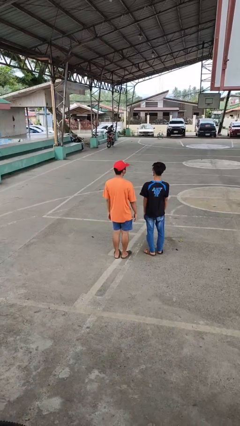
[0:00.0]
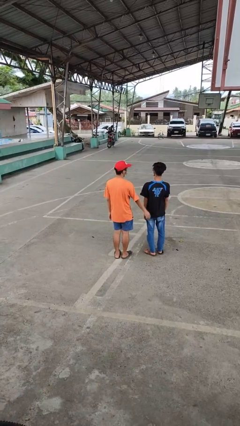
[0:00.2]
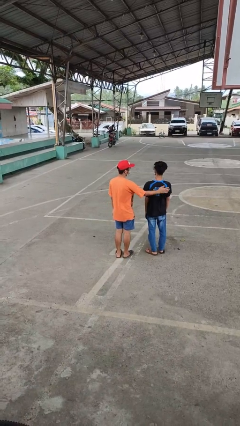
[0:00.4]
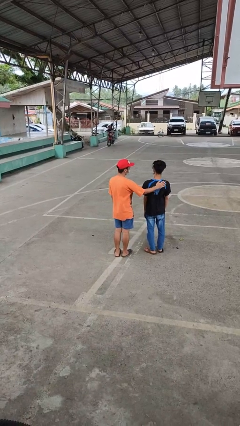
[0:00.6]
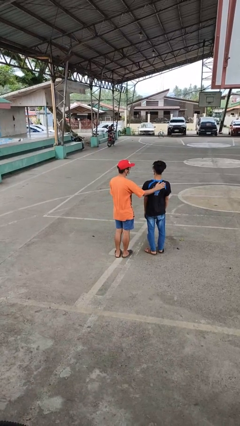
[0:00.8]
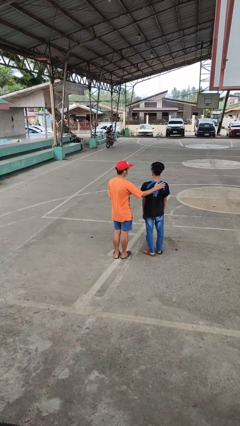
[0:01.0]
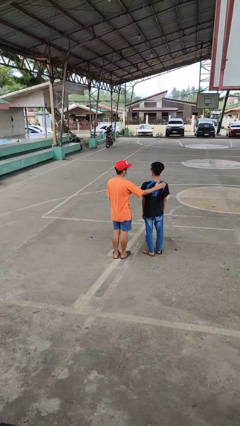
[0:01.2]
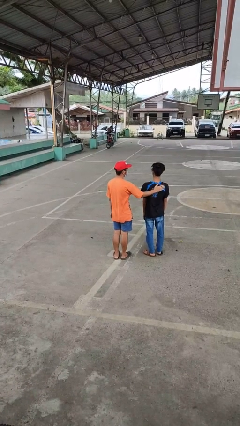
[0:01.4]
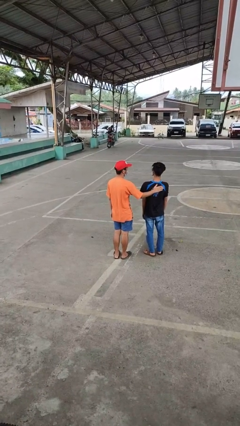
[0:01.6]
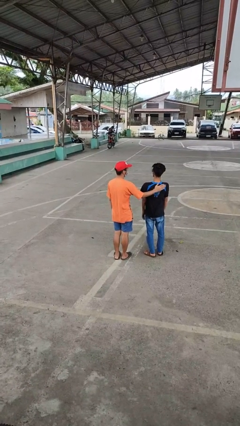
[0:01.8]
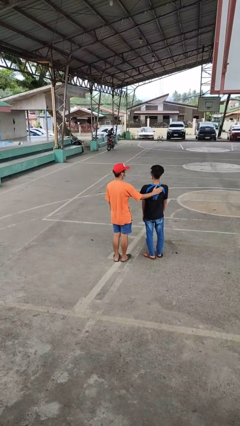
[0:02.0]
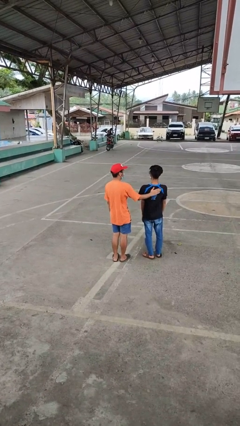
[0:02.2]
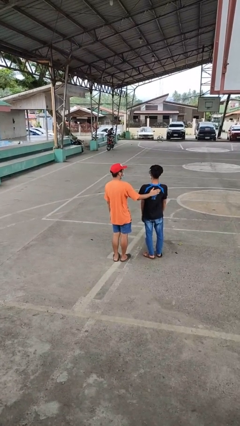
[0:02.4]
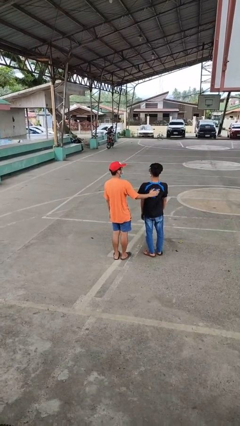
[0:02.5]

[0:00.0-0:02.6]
person touches back of person

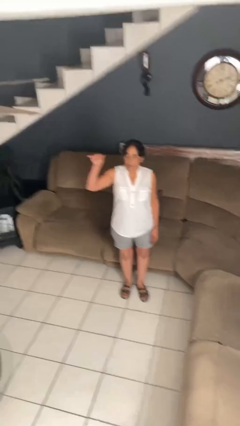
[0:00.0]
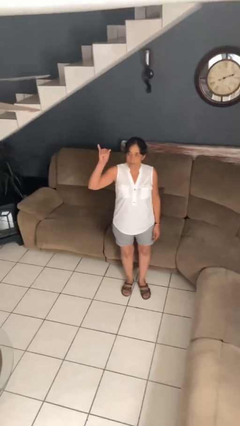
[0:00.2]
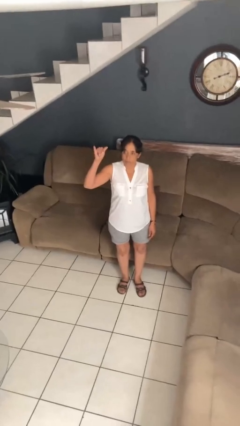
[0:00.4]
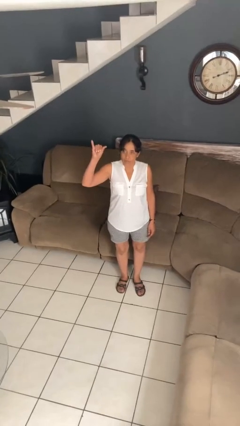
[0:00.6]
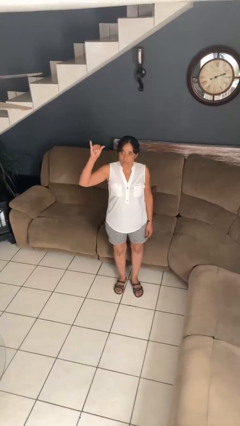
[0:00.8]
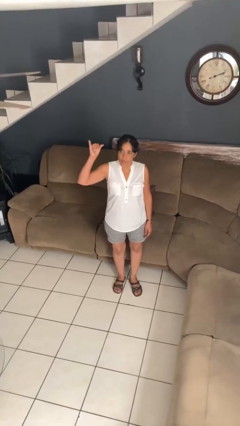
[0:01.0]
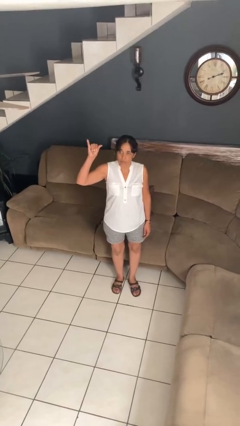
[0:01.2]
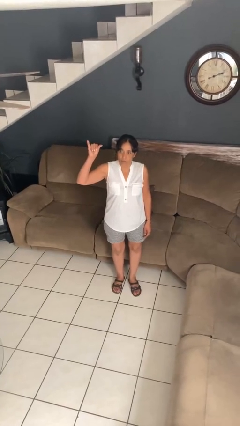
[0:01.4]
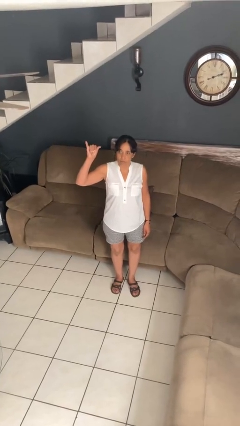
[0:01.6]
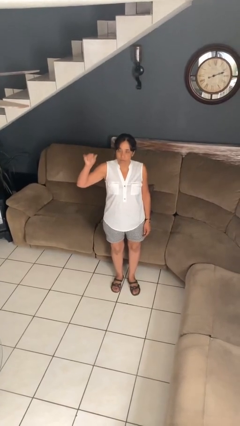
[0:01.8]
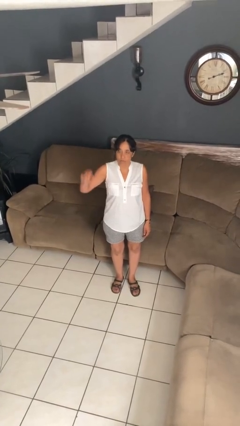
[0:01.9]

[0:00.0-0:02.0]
person gestures hang loose

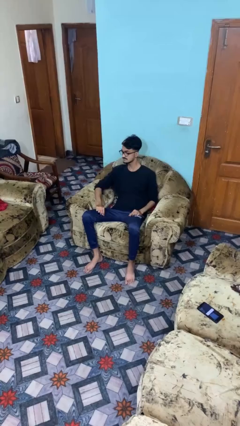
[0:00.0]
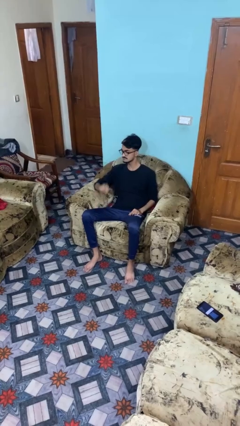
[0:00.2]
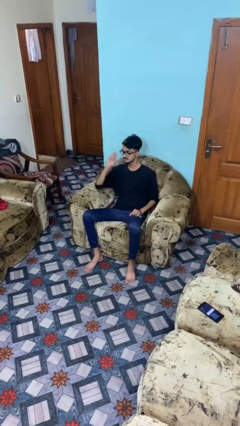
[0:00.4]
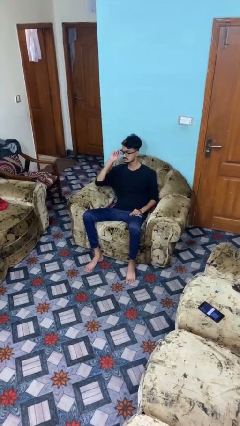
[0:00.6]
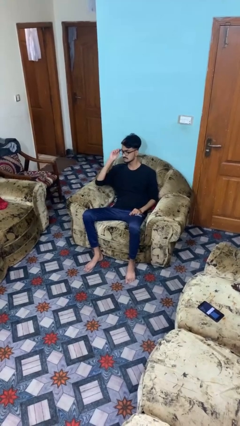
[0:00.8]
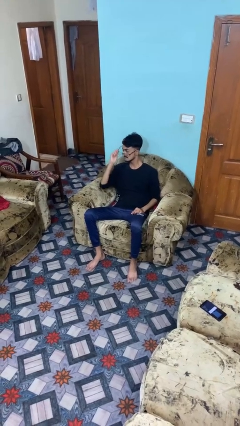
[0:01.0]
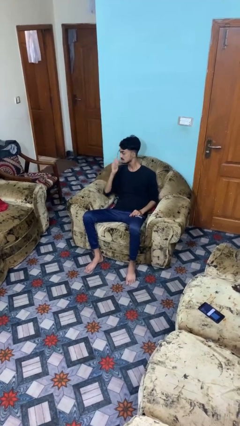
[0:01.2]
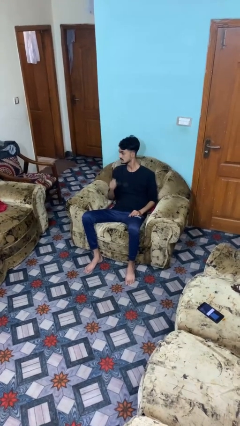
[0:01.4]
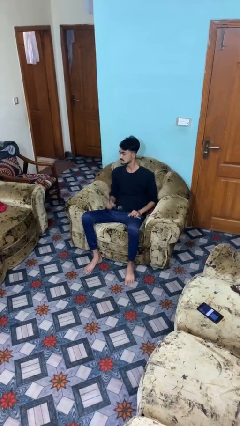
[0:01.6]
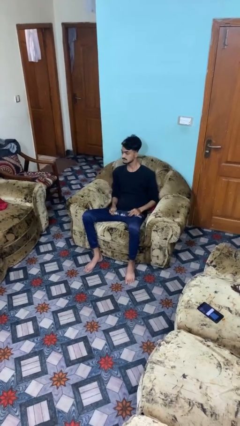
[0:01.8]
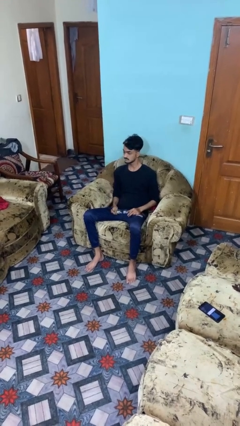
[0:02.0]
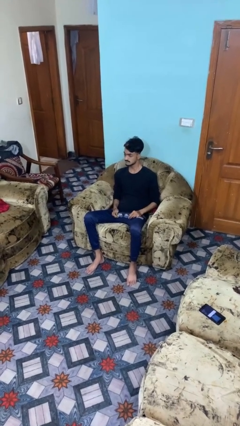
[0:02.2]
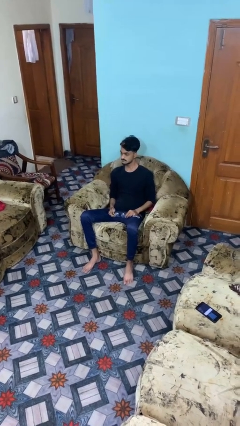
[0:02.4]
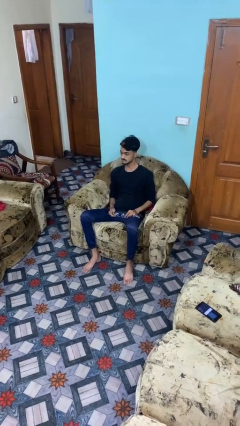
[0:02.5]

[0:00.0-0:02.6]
person takes off glasses

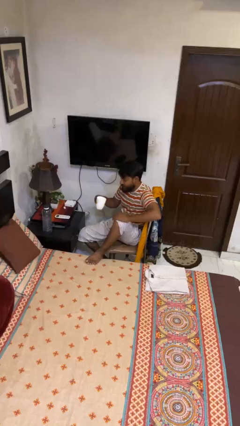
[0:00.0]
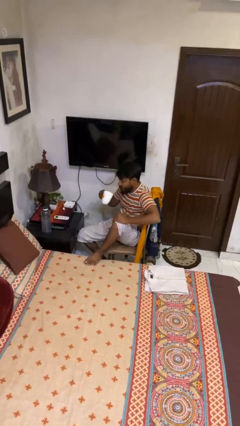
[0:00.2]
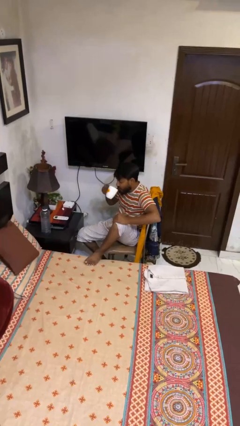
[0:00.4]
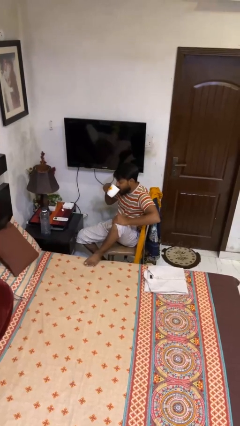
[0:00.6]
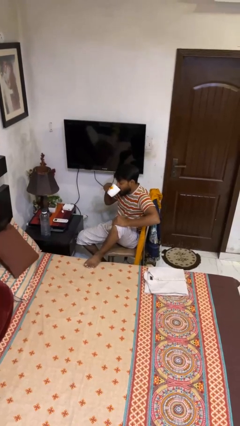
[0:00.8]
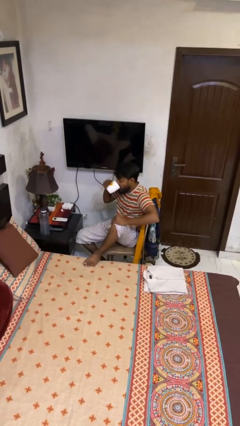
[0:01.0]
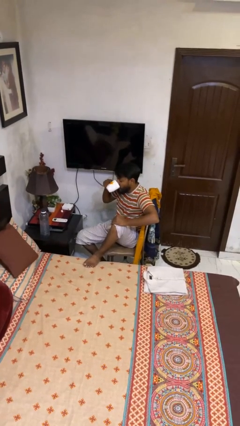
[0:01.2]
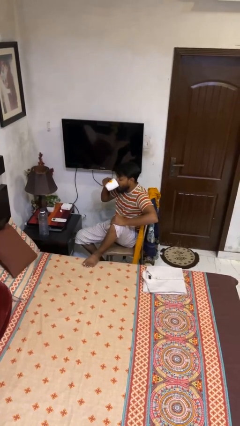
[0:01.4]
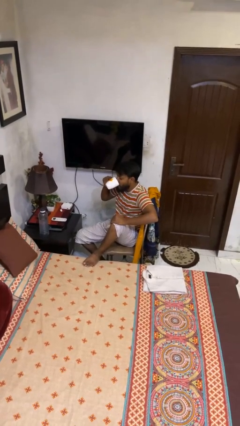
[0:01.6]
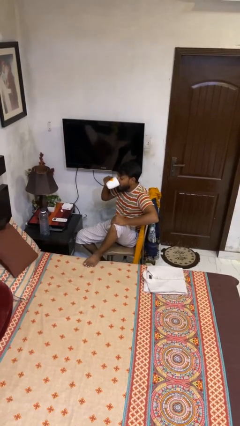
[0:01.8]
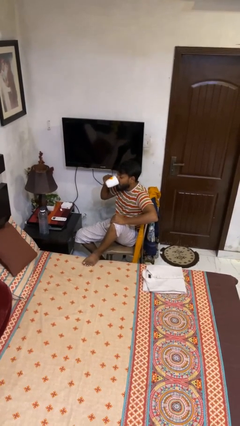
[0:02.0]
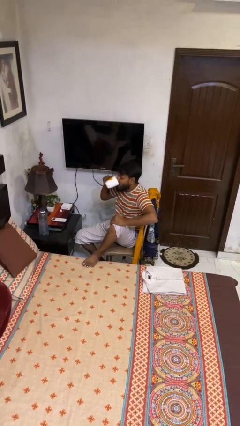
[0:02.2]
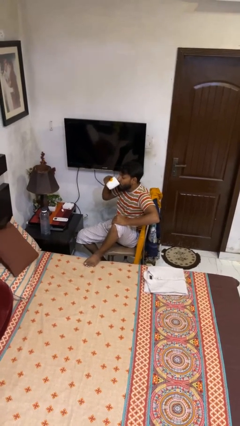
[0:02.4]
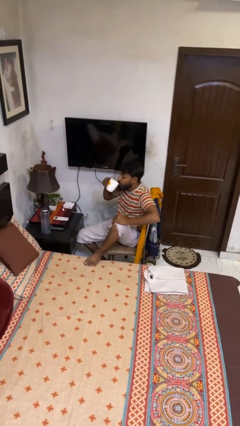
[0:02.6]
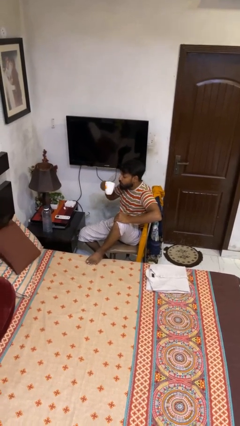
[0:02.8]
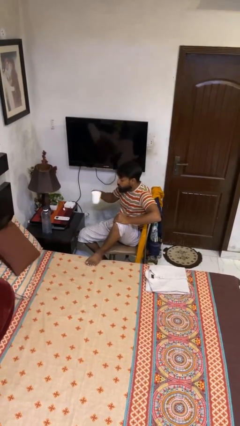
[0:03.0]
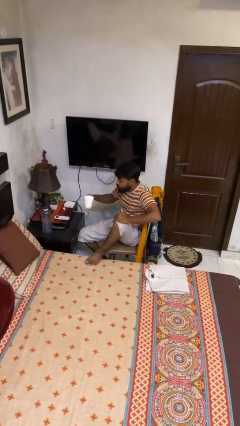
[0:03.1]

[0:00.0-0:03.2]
person drinks from mug

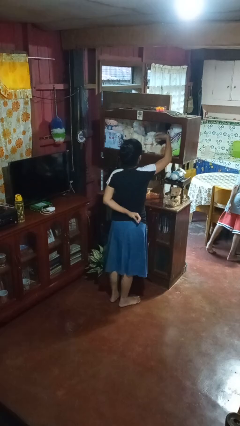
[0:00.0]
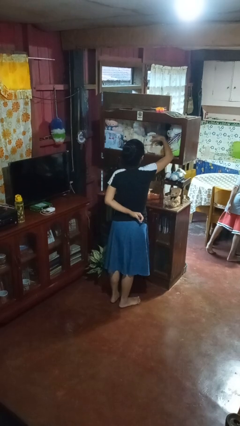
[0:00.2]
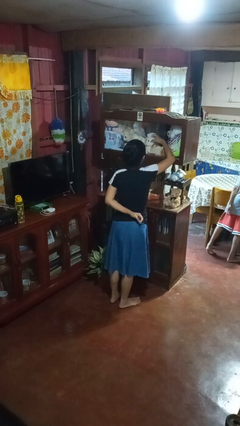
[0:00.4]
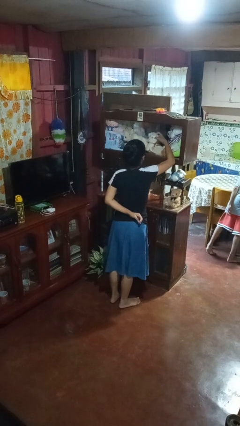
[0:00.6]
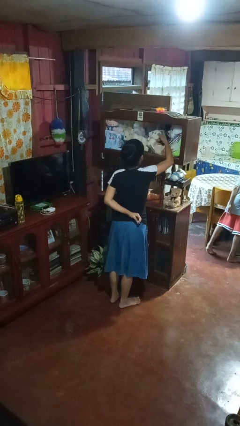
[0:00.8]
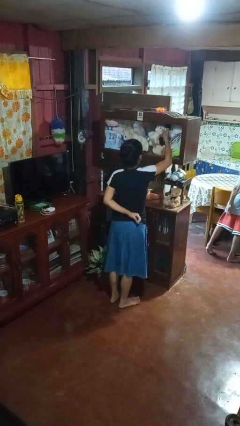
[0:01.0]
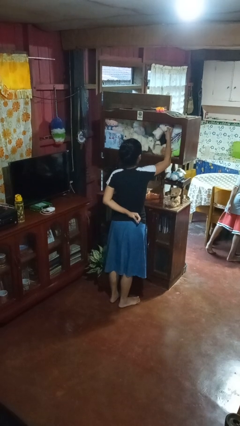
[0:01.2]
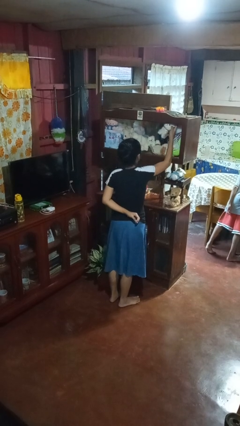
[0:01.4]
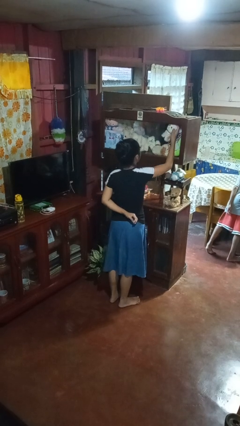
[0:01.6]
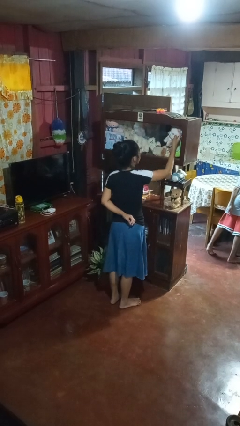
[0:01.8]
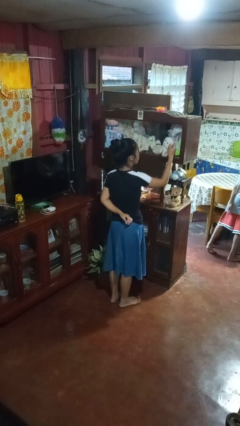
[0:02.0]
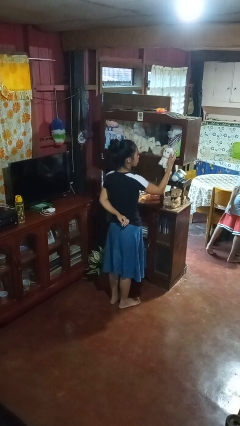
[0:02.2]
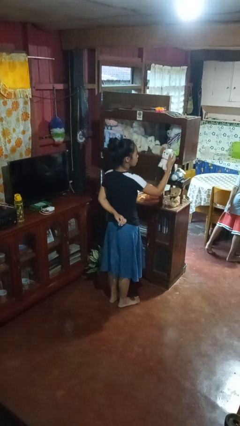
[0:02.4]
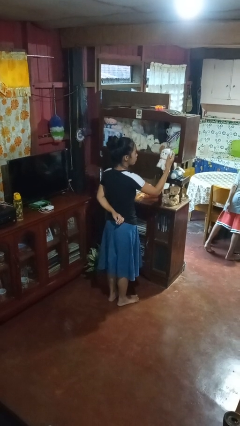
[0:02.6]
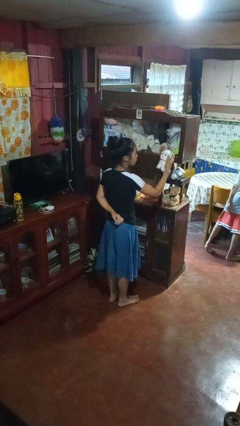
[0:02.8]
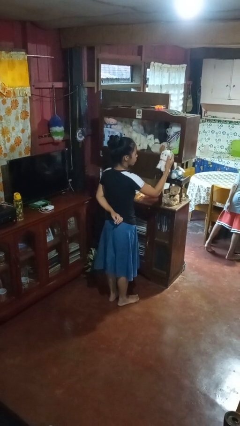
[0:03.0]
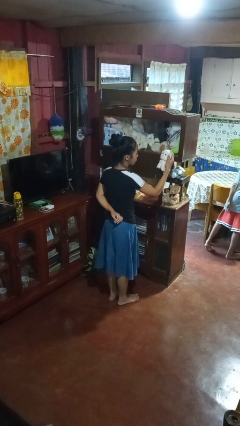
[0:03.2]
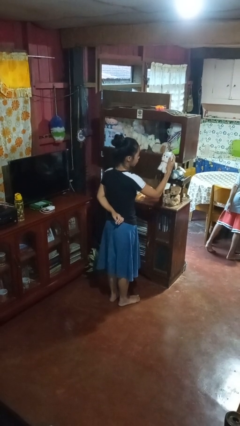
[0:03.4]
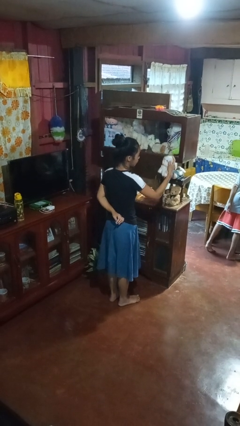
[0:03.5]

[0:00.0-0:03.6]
person picks up object from shelf

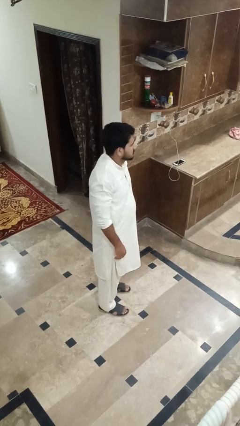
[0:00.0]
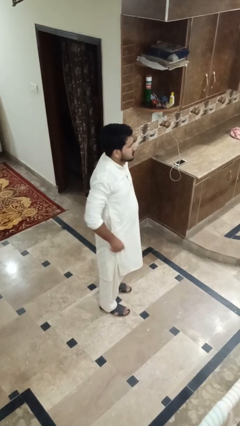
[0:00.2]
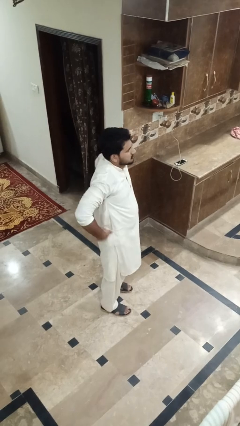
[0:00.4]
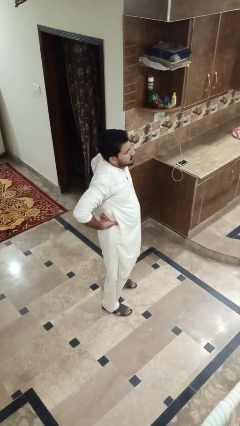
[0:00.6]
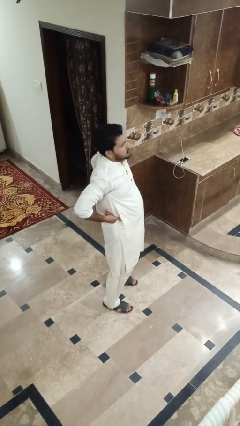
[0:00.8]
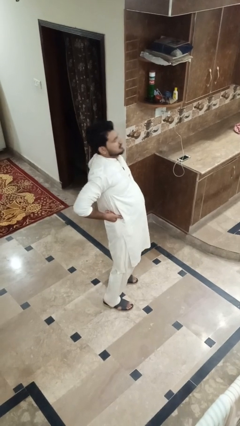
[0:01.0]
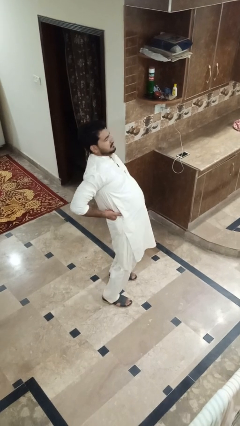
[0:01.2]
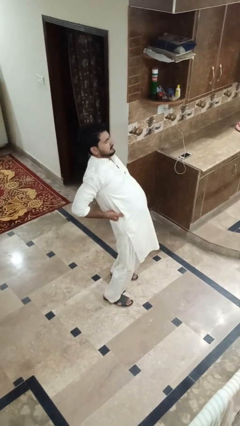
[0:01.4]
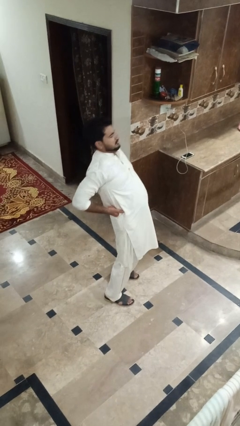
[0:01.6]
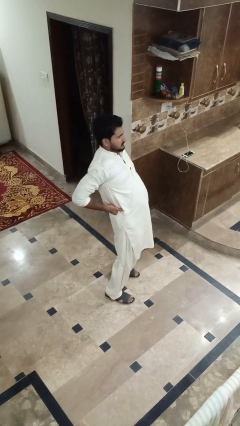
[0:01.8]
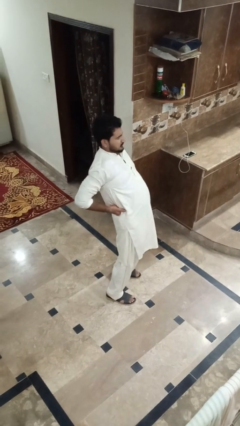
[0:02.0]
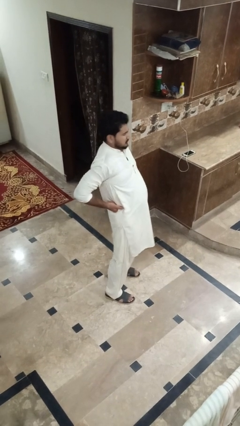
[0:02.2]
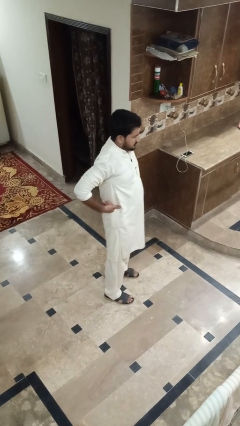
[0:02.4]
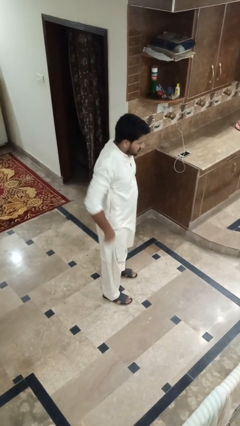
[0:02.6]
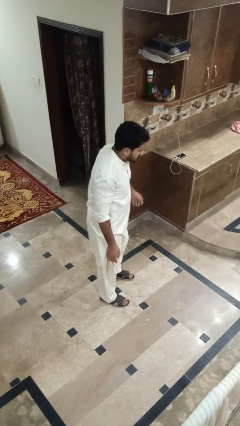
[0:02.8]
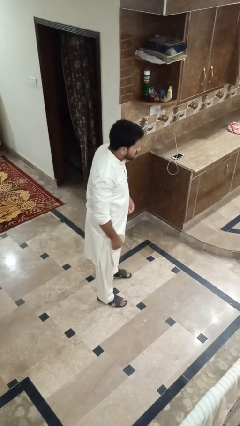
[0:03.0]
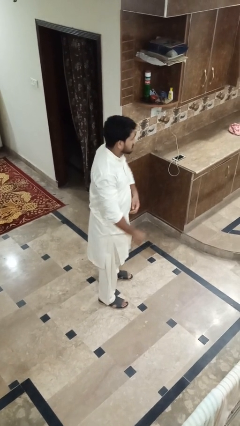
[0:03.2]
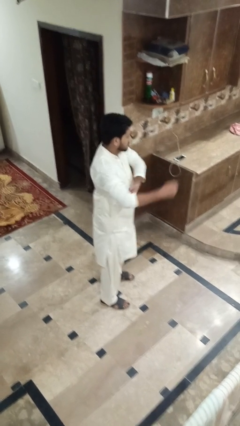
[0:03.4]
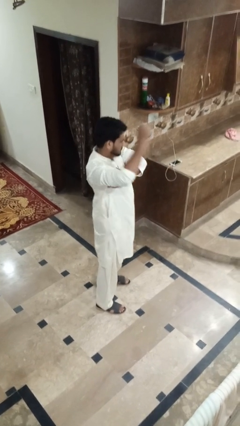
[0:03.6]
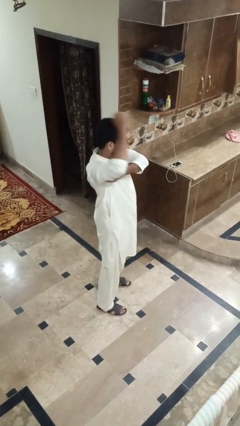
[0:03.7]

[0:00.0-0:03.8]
person stretches back
